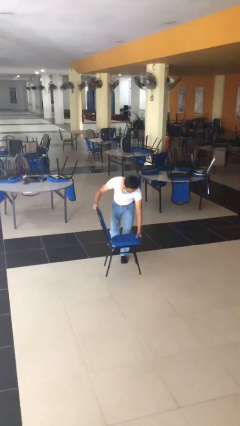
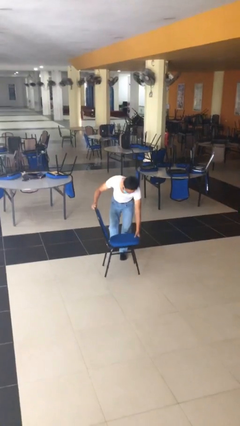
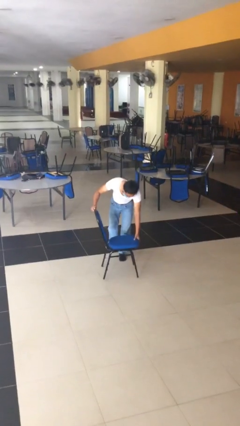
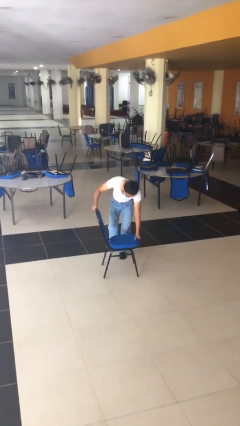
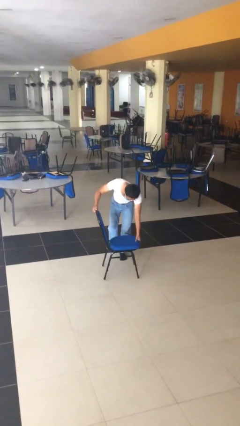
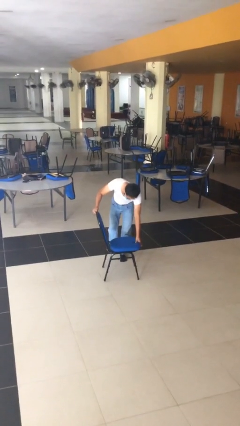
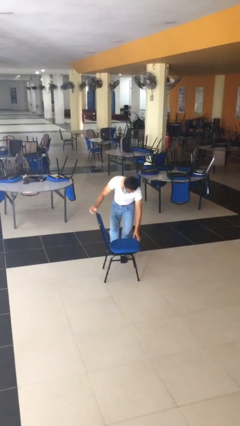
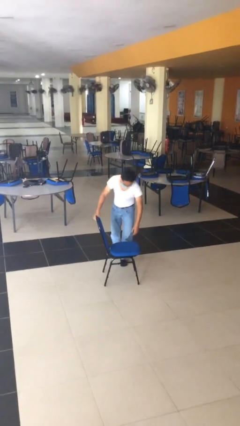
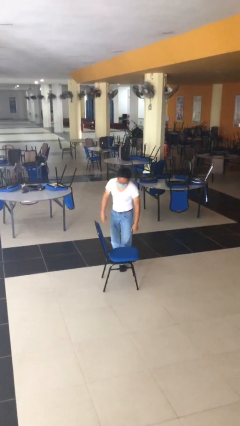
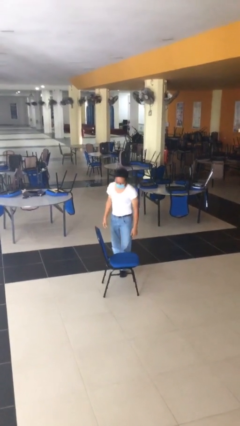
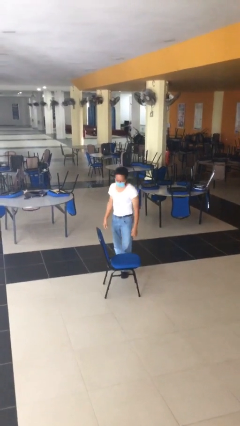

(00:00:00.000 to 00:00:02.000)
person puts down object on floor

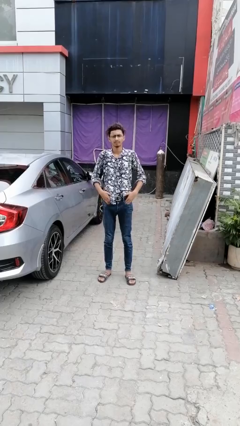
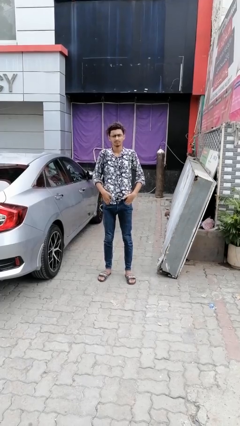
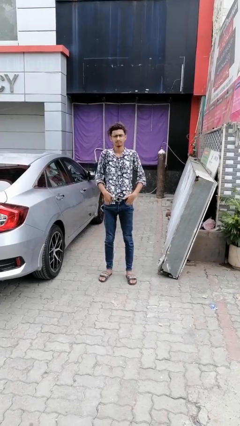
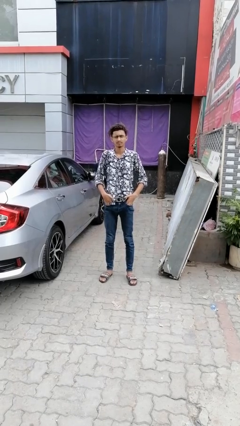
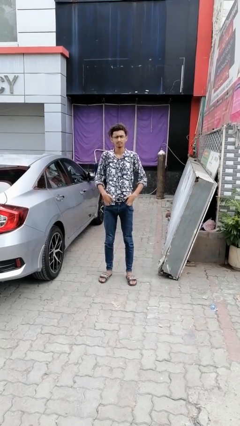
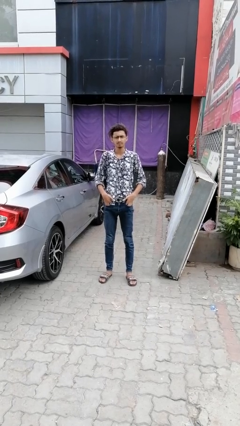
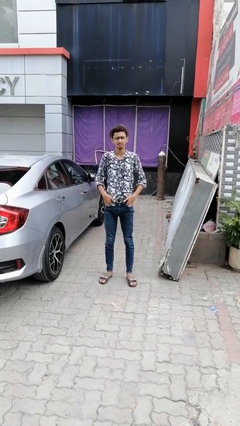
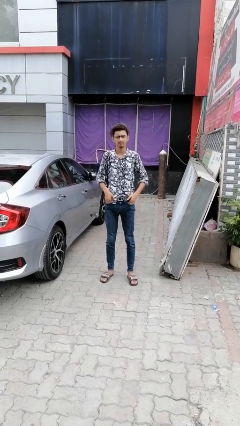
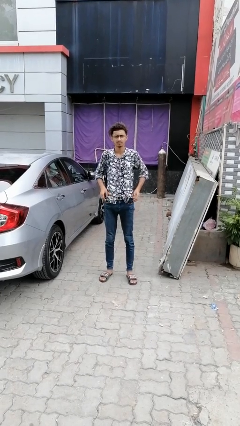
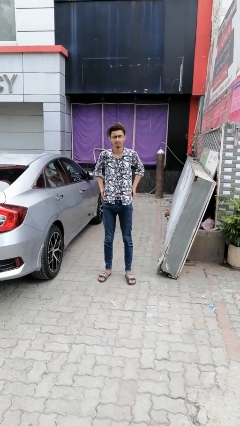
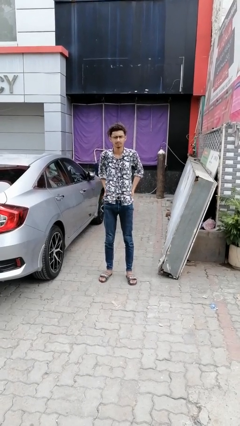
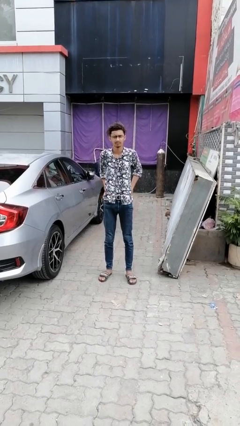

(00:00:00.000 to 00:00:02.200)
person puts hands in back pockets

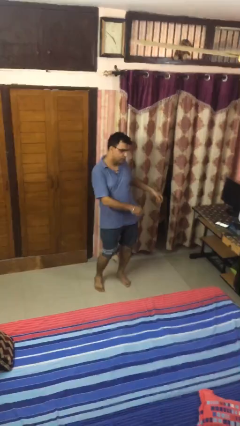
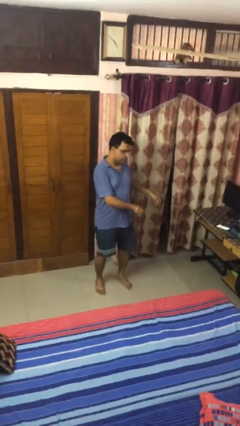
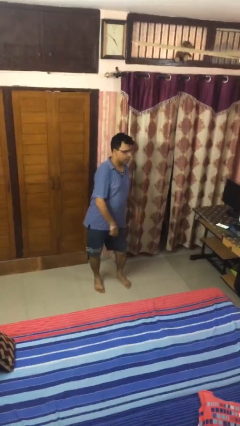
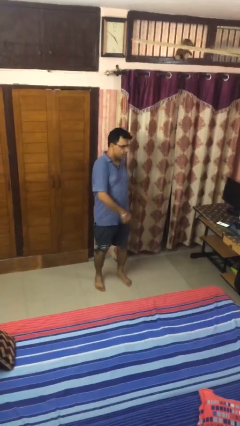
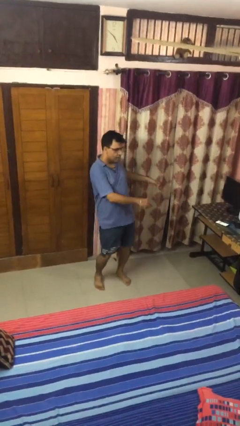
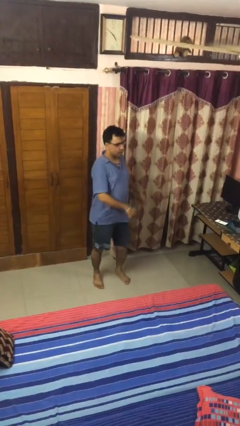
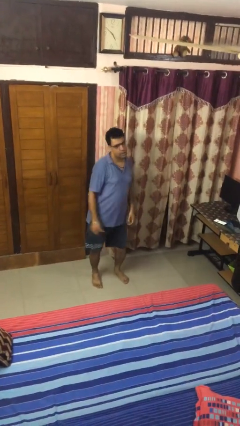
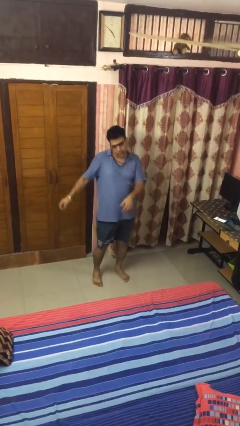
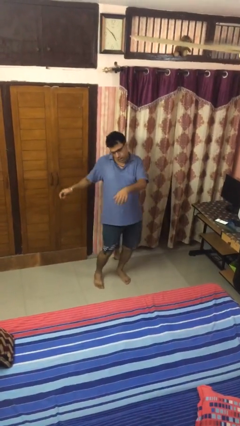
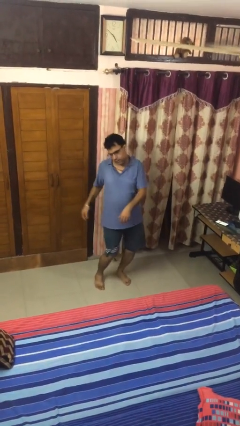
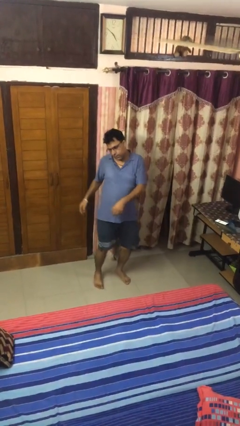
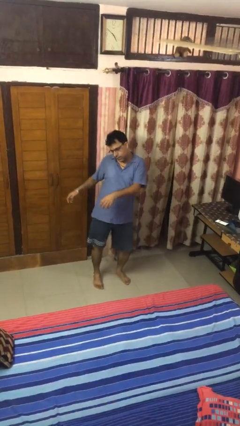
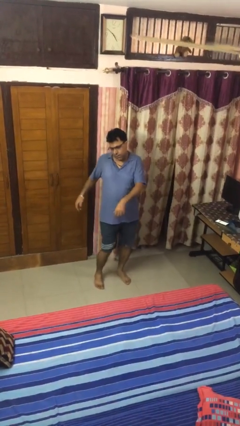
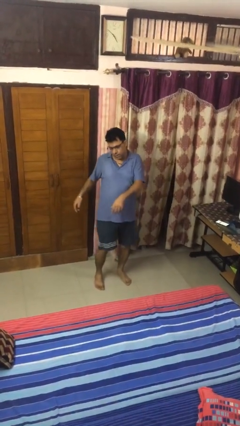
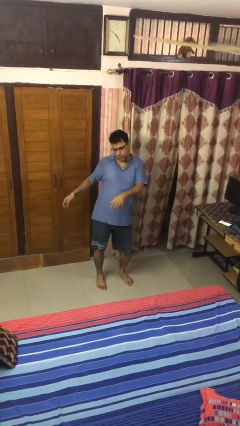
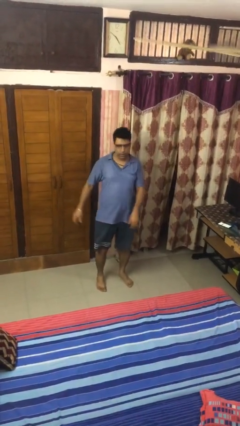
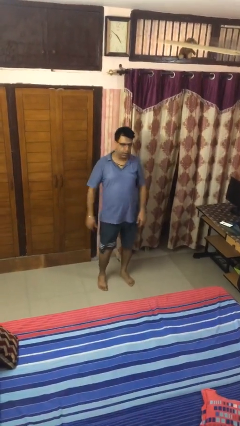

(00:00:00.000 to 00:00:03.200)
person dances in place

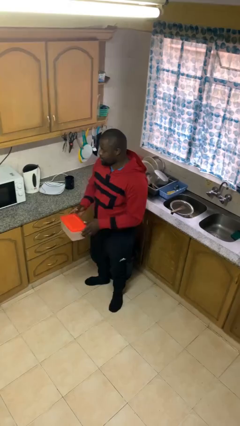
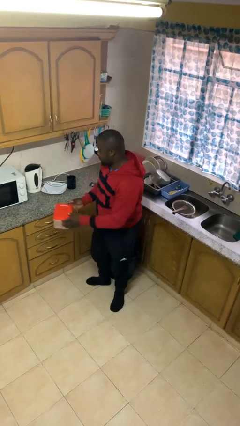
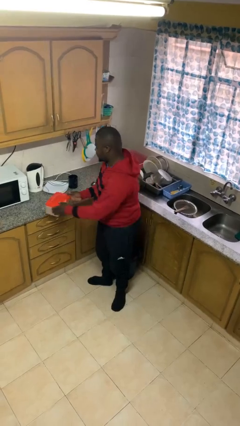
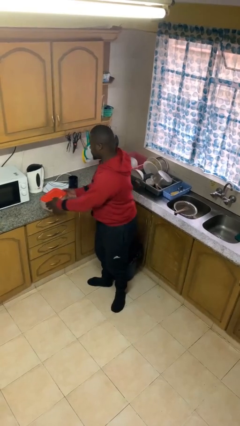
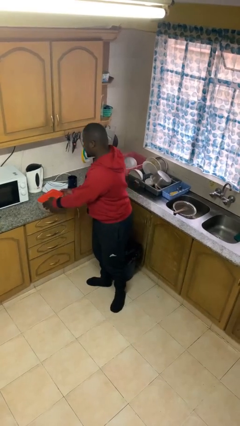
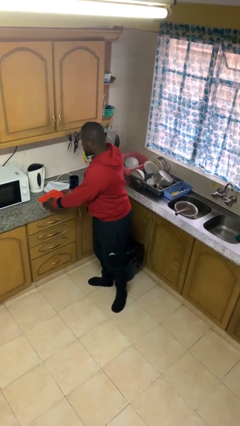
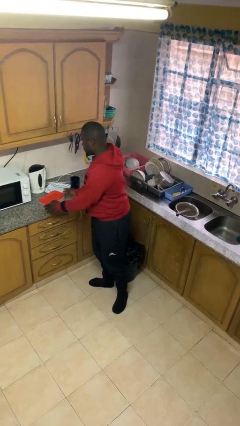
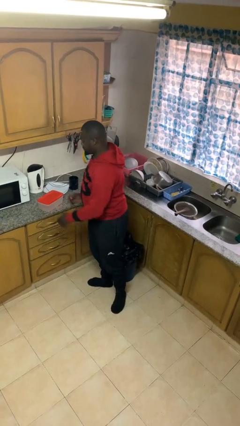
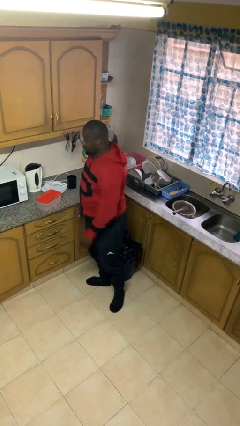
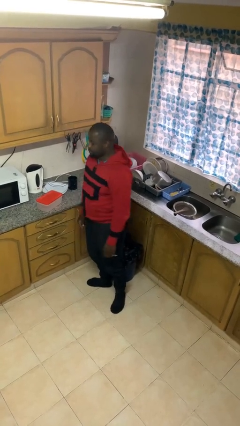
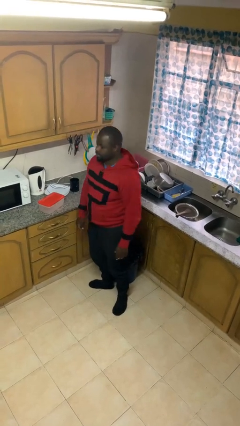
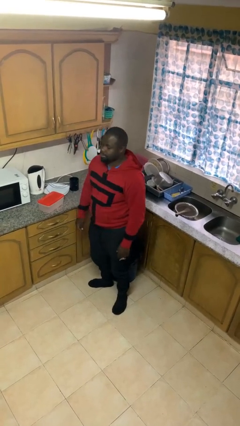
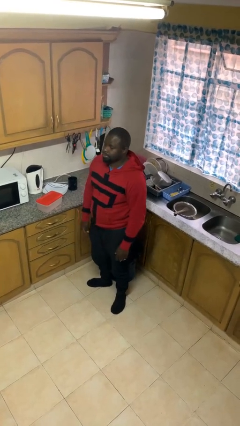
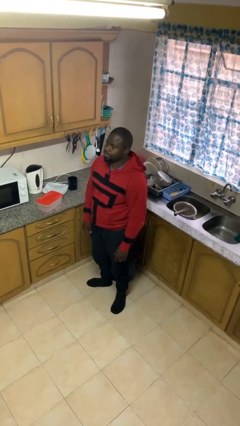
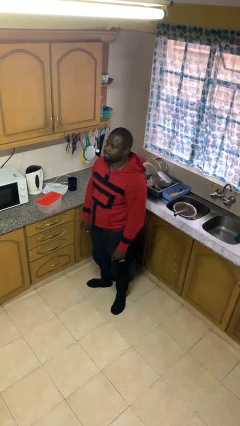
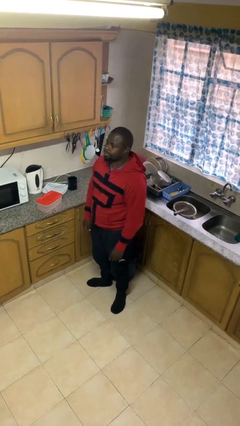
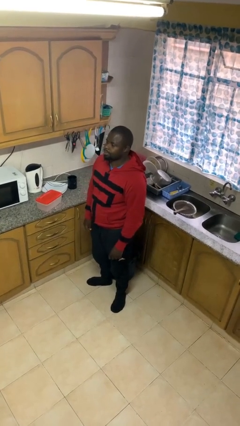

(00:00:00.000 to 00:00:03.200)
person puts down object on countertop

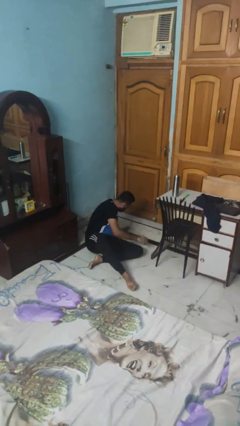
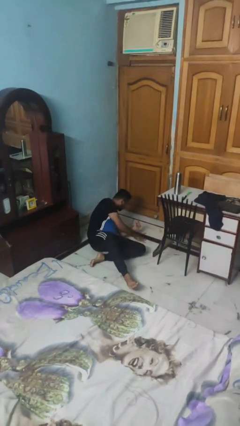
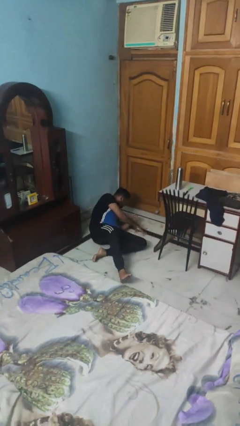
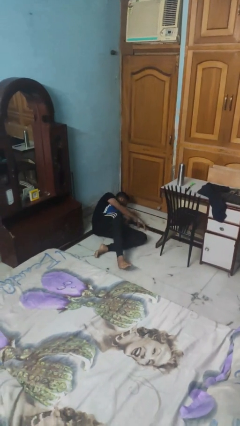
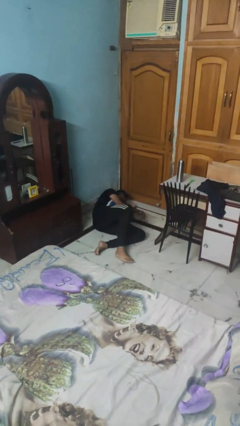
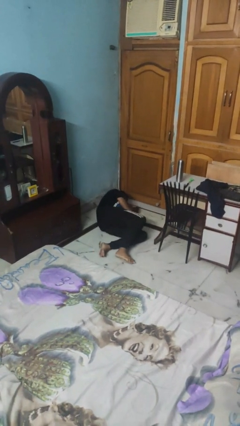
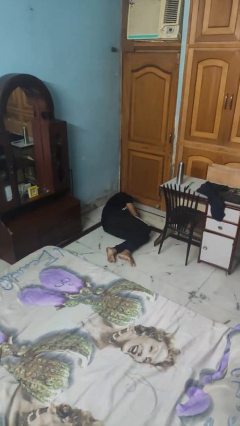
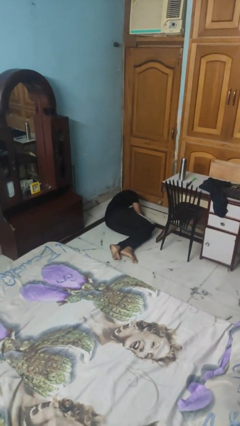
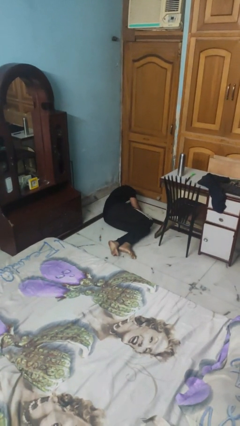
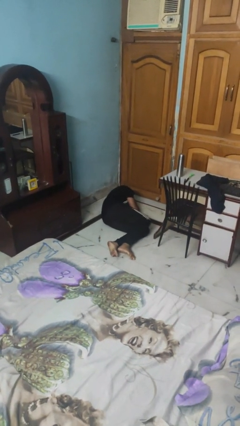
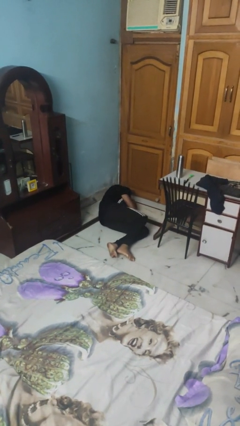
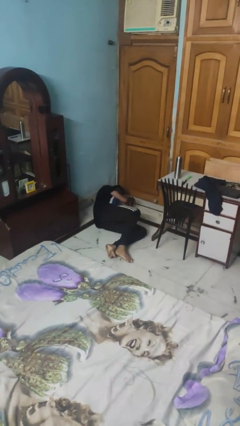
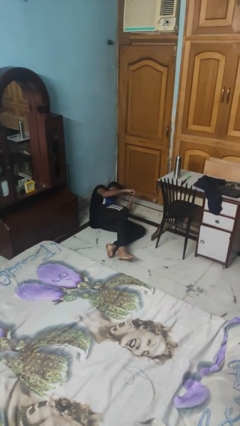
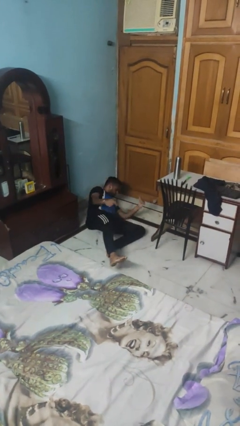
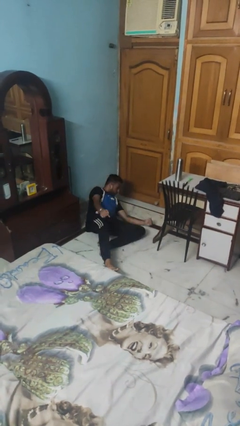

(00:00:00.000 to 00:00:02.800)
person lies down on floor

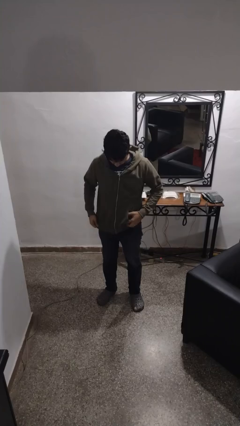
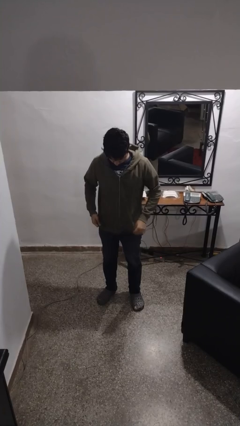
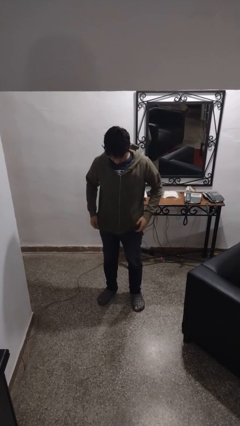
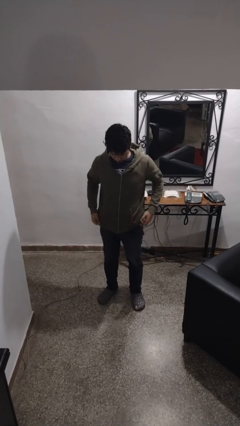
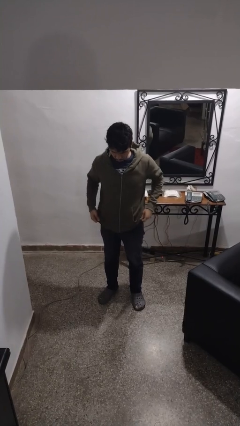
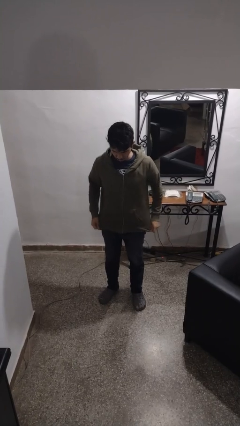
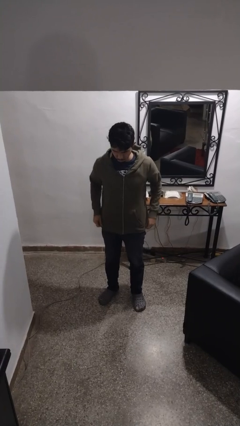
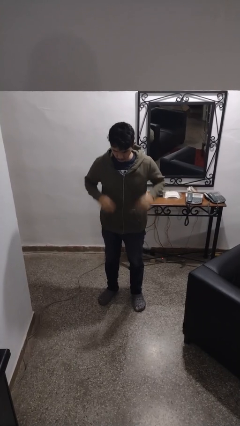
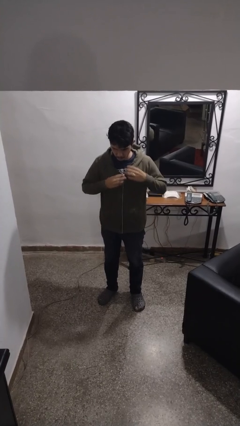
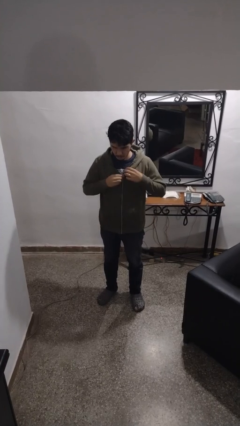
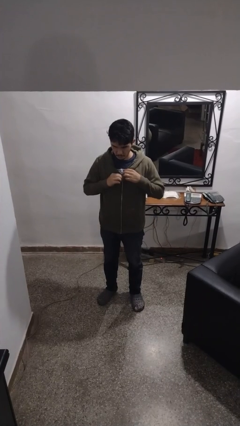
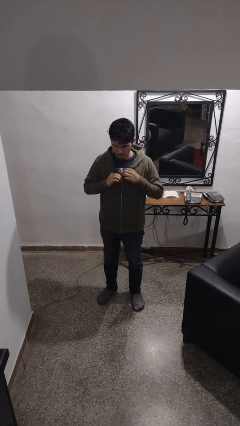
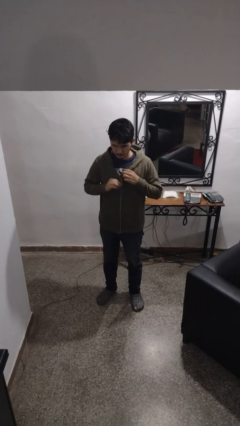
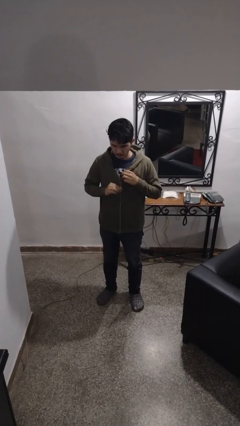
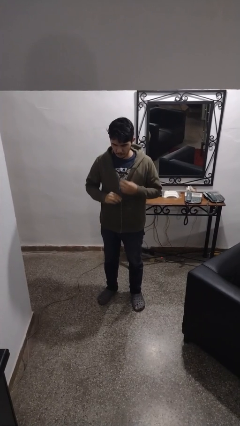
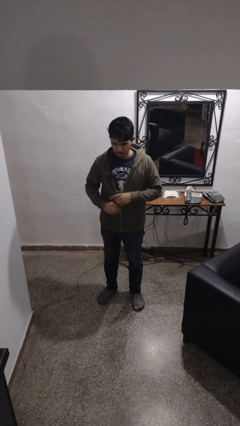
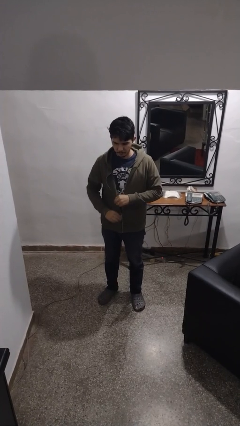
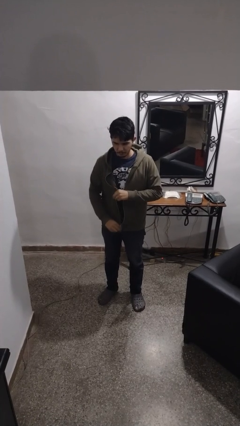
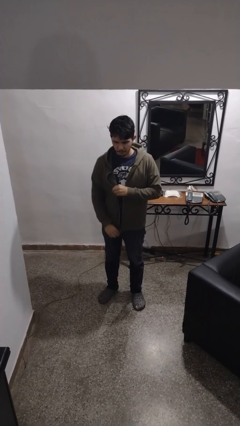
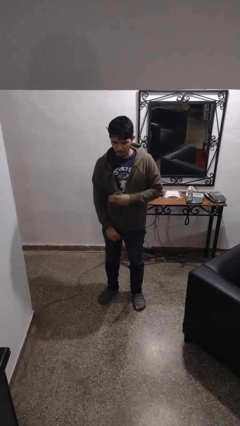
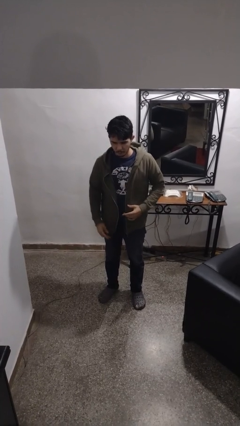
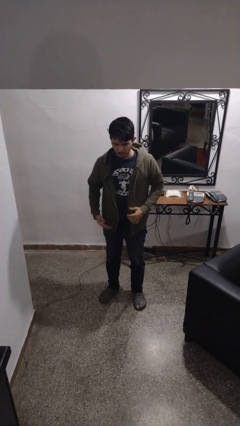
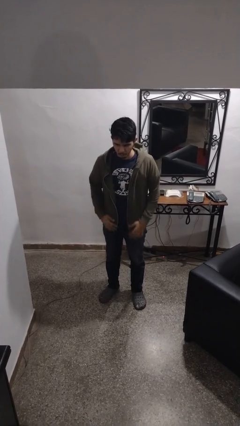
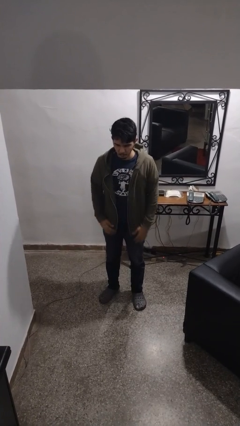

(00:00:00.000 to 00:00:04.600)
person unzips jacket
